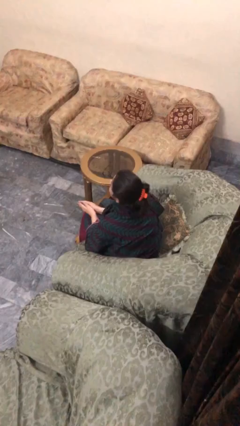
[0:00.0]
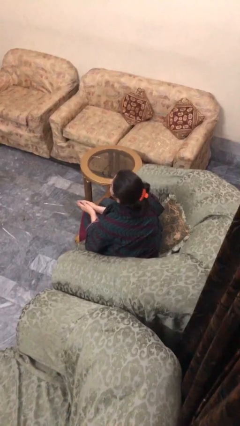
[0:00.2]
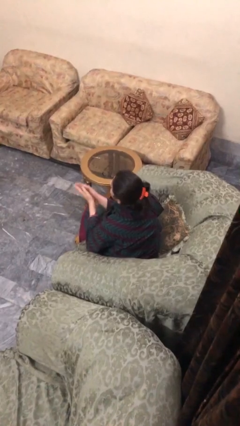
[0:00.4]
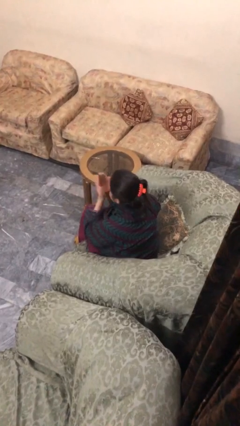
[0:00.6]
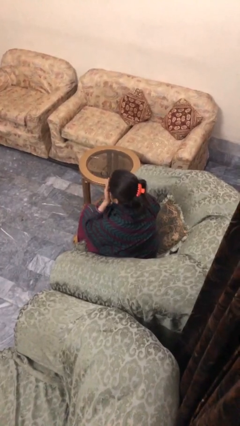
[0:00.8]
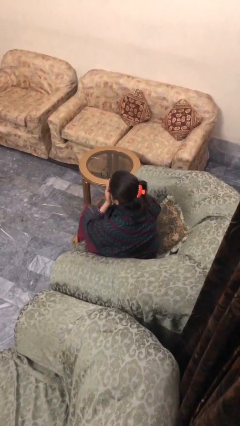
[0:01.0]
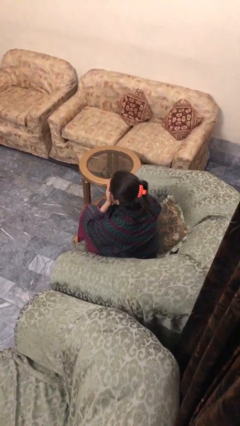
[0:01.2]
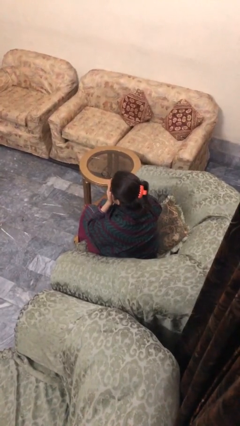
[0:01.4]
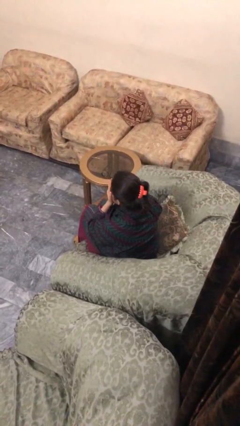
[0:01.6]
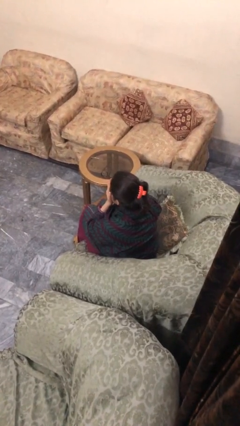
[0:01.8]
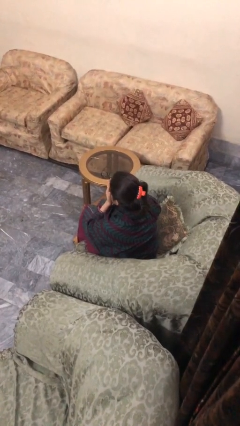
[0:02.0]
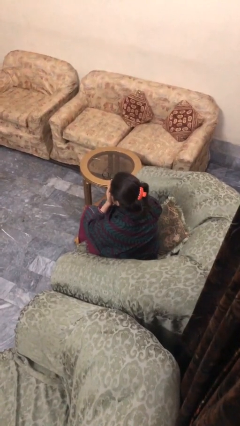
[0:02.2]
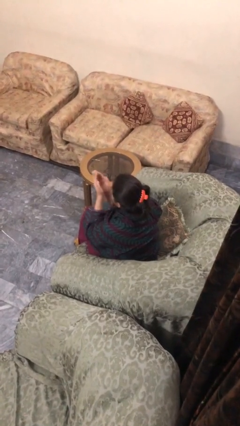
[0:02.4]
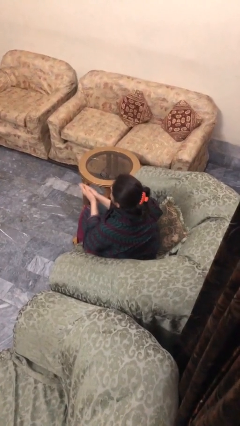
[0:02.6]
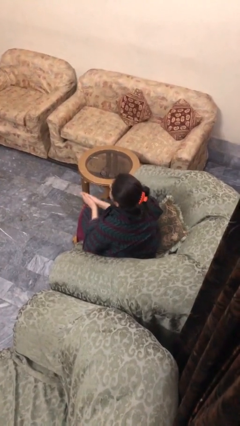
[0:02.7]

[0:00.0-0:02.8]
person covers face with hands

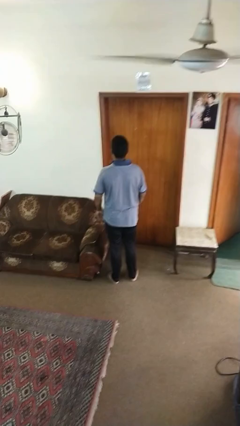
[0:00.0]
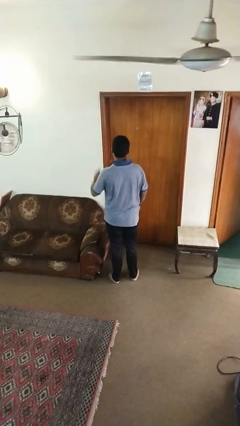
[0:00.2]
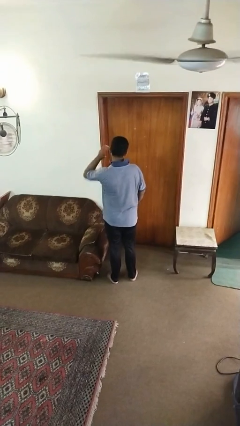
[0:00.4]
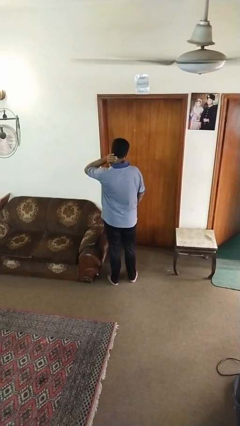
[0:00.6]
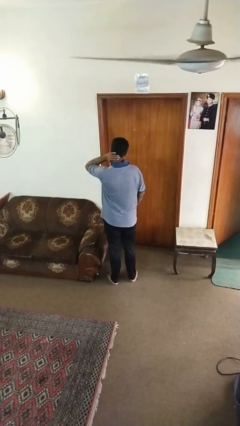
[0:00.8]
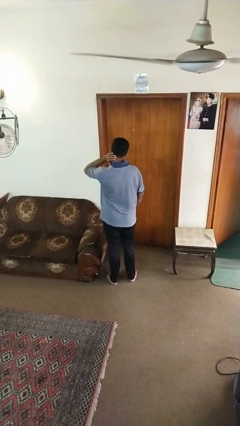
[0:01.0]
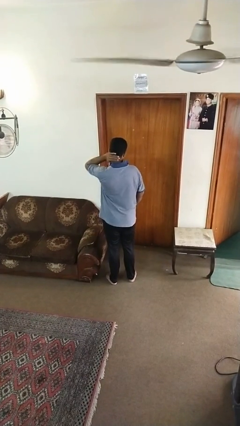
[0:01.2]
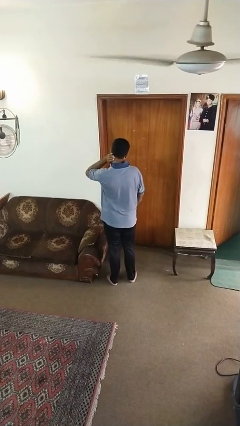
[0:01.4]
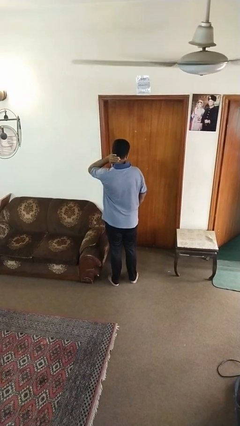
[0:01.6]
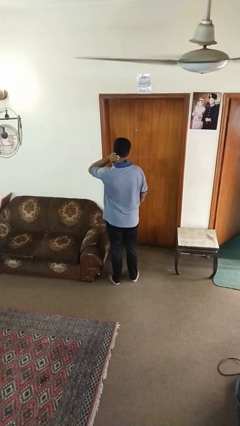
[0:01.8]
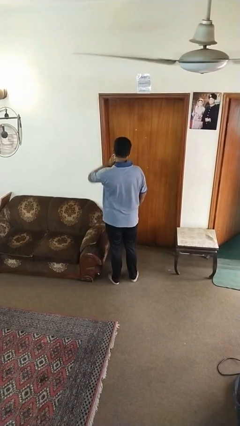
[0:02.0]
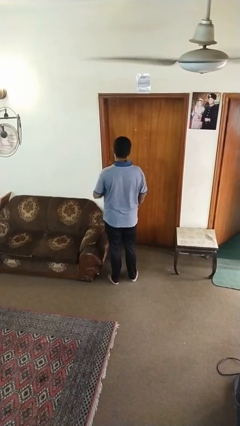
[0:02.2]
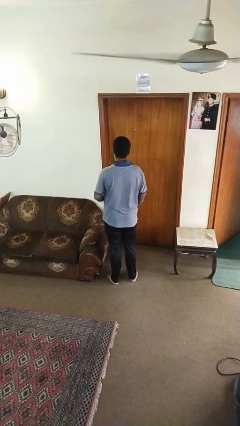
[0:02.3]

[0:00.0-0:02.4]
person rubs neck

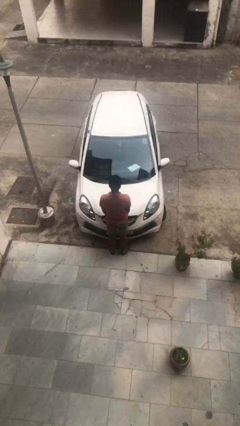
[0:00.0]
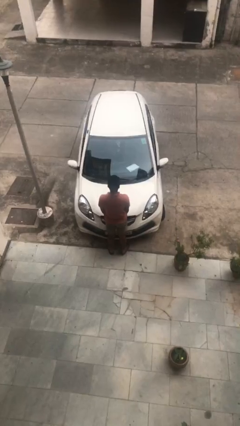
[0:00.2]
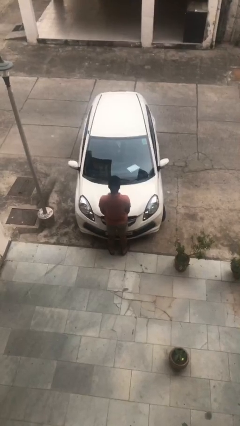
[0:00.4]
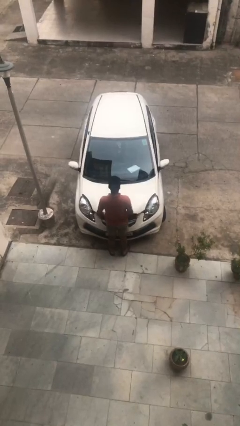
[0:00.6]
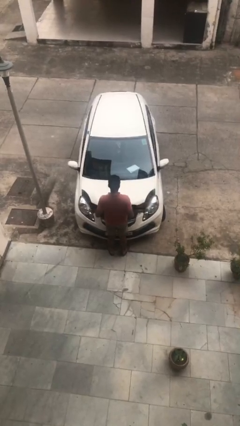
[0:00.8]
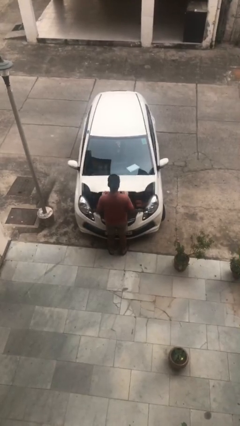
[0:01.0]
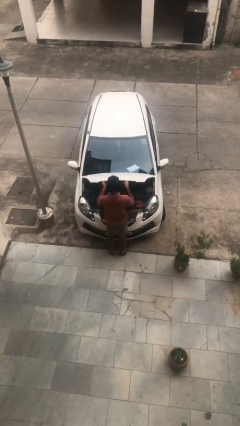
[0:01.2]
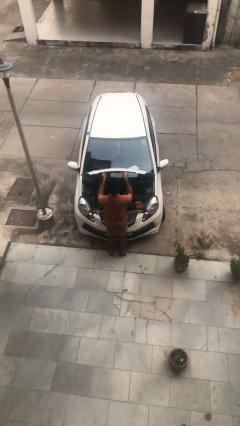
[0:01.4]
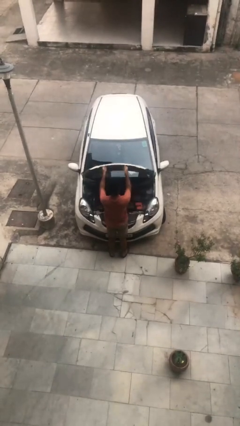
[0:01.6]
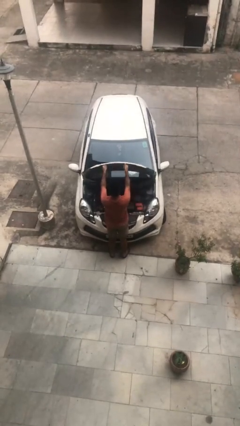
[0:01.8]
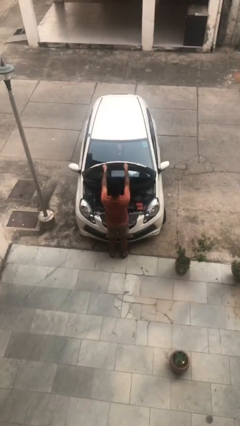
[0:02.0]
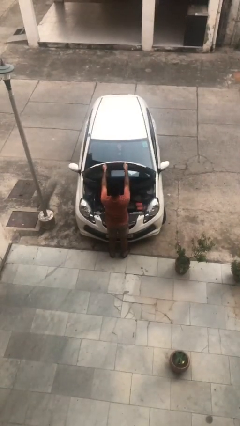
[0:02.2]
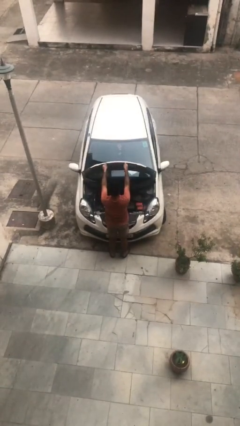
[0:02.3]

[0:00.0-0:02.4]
person opens car hood

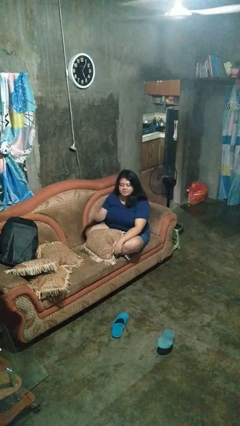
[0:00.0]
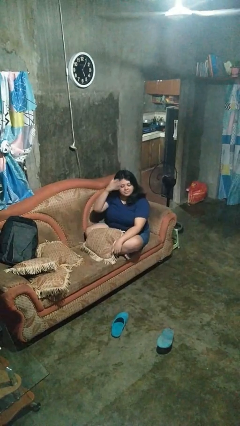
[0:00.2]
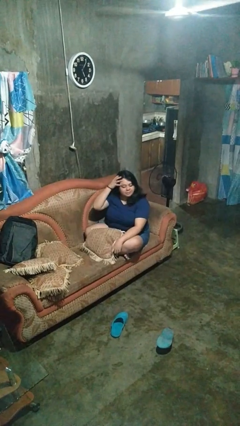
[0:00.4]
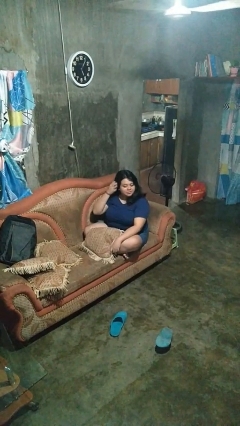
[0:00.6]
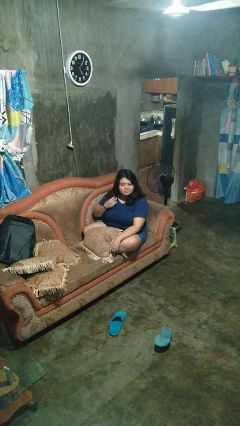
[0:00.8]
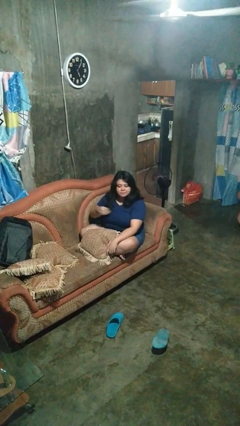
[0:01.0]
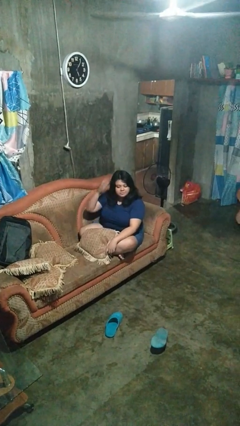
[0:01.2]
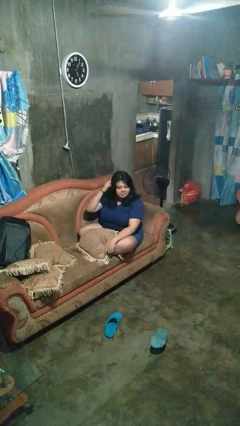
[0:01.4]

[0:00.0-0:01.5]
person strokes hair

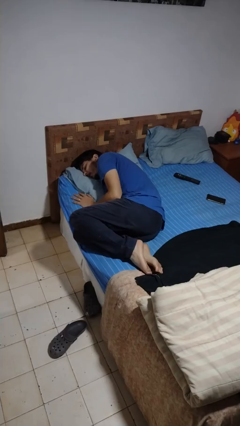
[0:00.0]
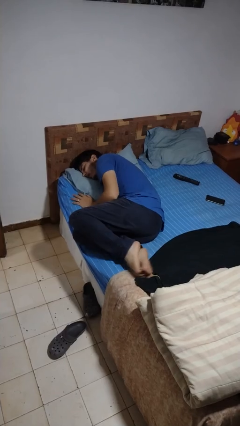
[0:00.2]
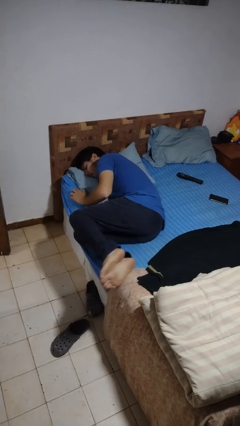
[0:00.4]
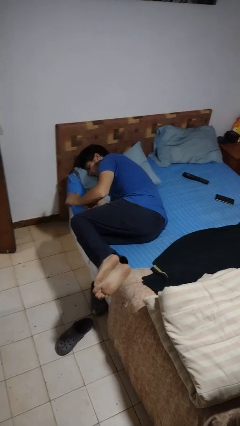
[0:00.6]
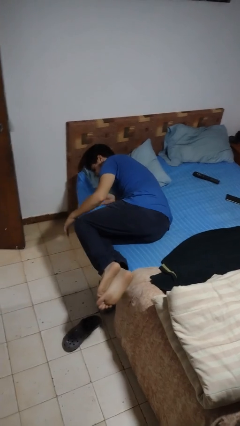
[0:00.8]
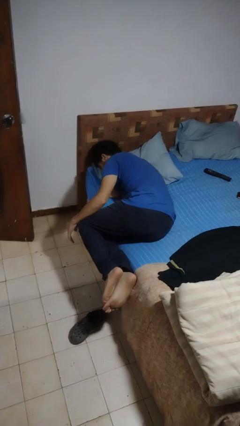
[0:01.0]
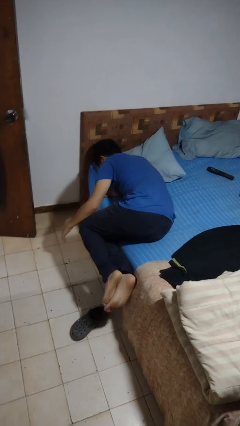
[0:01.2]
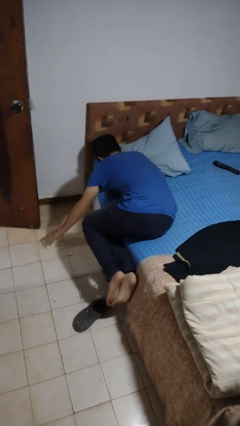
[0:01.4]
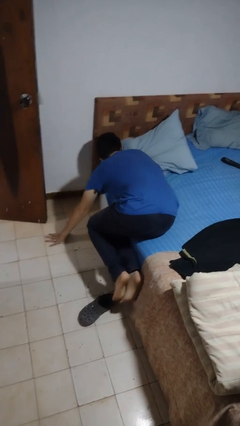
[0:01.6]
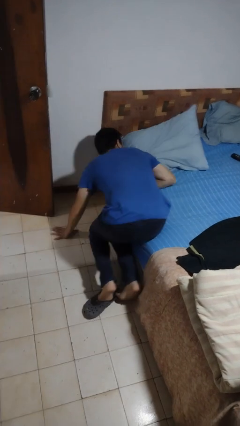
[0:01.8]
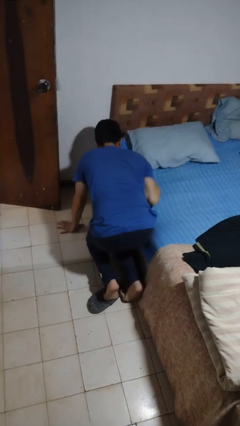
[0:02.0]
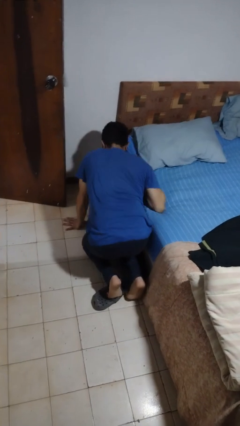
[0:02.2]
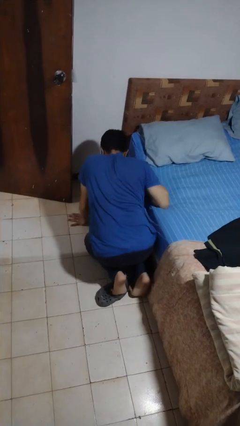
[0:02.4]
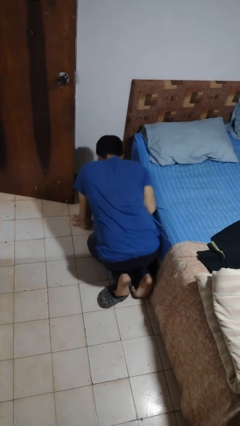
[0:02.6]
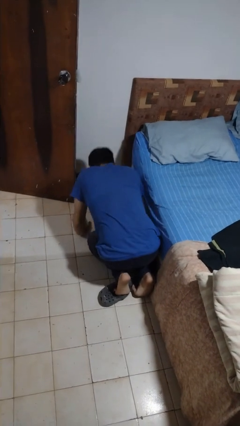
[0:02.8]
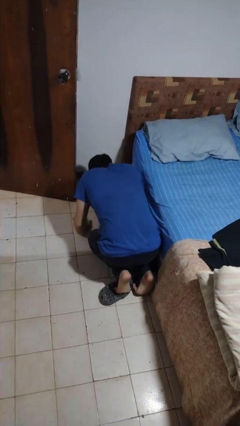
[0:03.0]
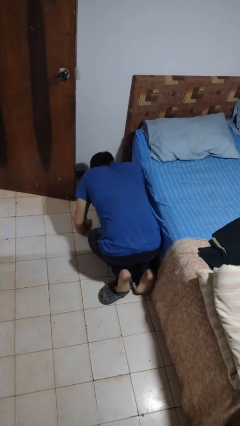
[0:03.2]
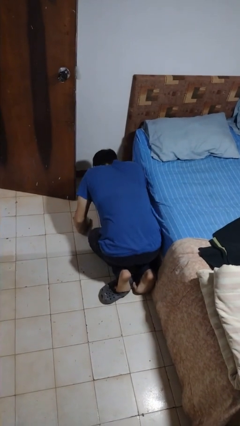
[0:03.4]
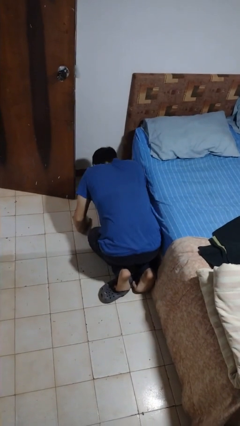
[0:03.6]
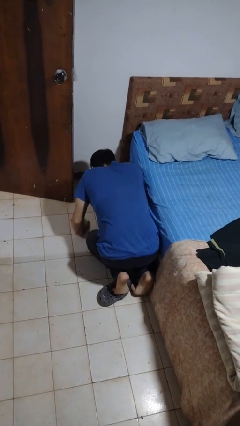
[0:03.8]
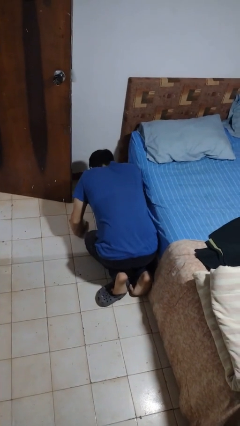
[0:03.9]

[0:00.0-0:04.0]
person falls from bed

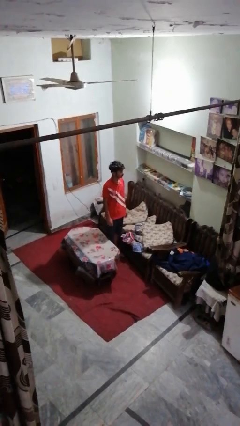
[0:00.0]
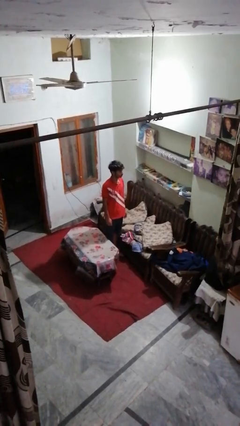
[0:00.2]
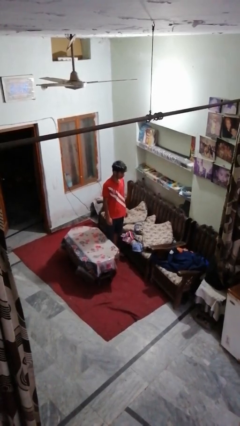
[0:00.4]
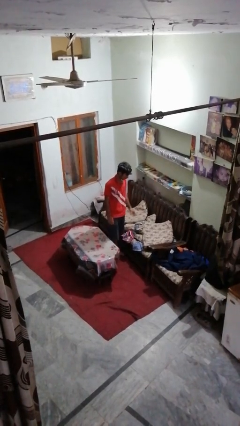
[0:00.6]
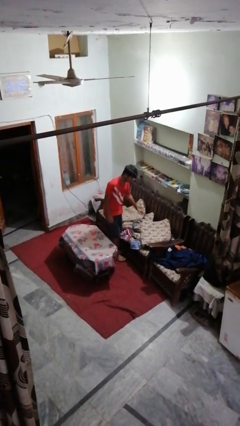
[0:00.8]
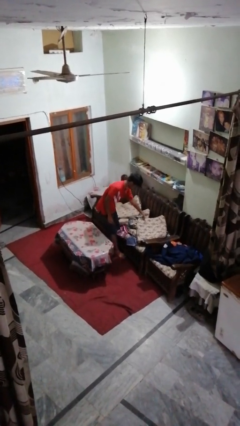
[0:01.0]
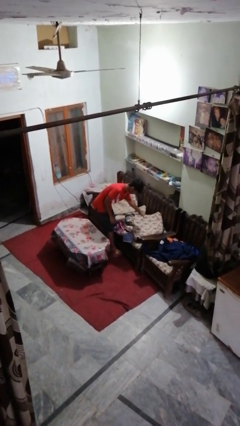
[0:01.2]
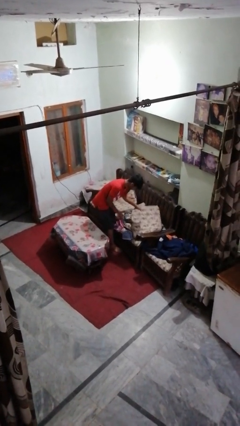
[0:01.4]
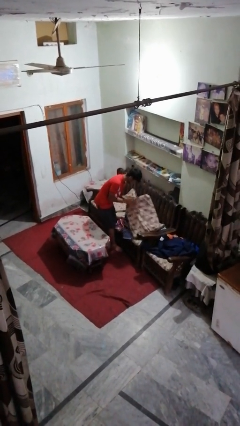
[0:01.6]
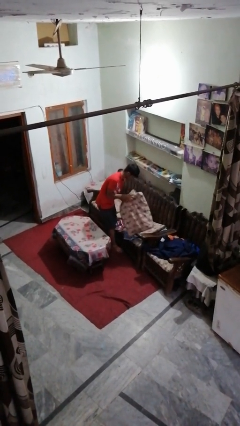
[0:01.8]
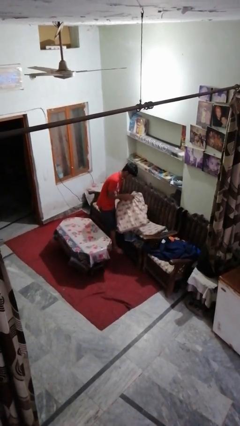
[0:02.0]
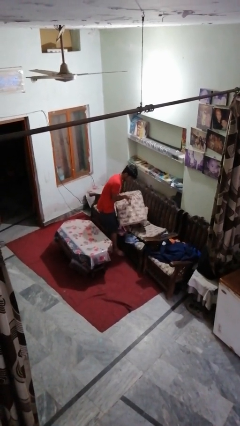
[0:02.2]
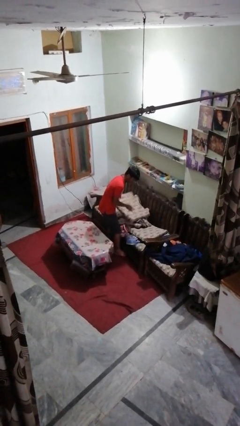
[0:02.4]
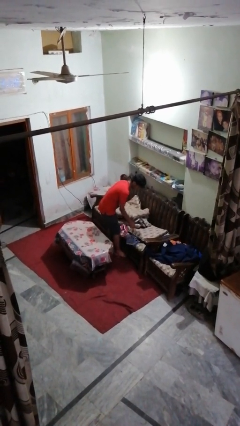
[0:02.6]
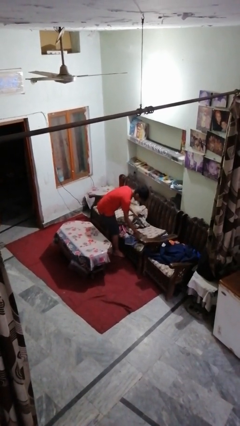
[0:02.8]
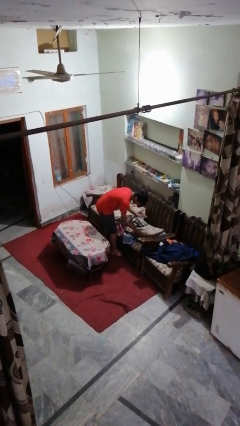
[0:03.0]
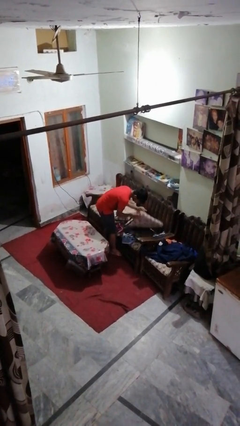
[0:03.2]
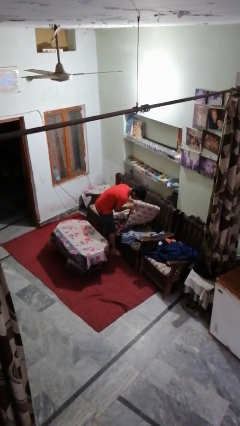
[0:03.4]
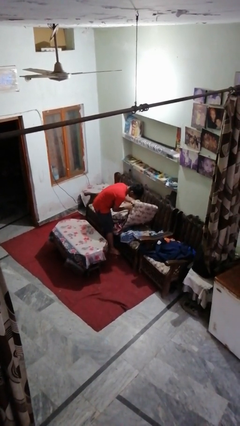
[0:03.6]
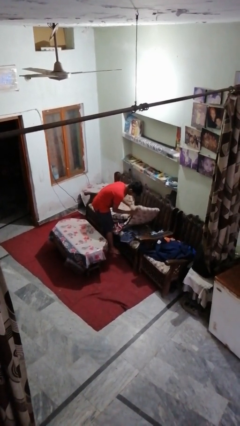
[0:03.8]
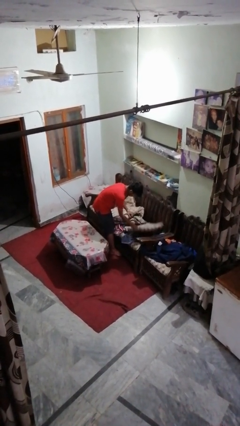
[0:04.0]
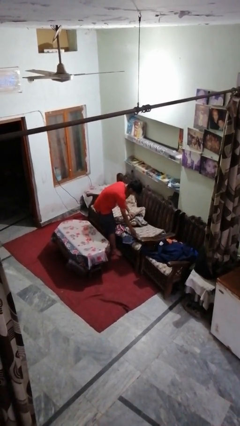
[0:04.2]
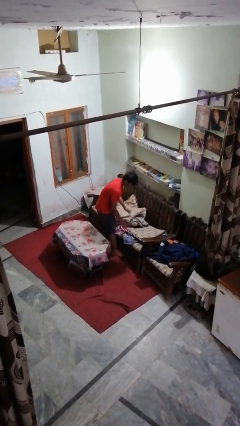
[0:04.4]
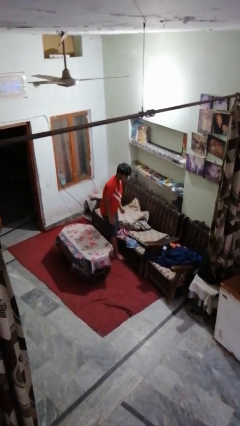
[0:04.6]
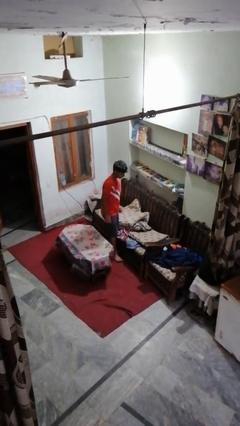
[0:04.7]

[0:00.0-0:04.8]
person searches in couch
